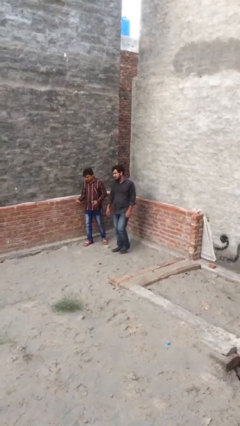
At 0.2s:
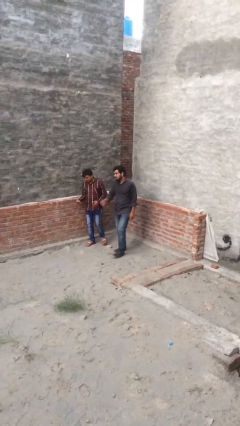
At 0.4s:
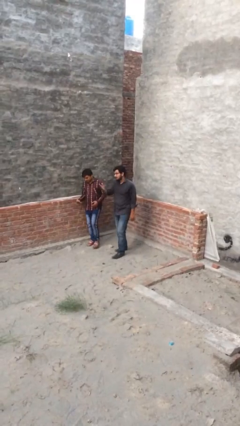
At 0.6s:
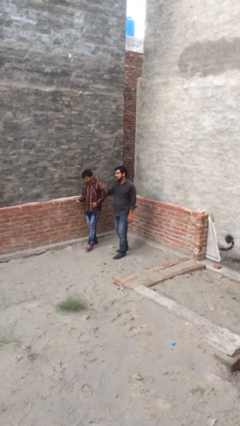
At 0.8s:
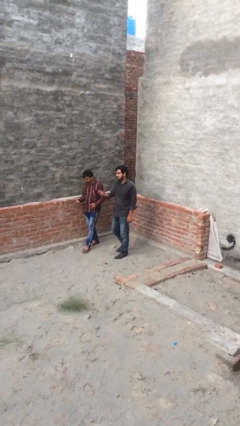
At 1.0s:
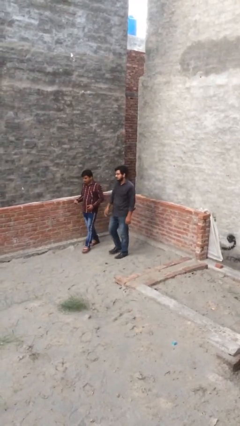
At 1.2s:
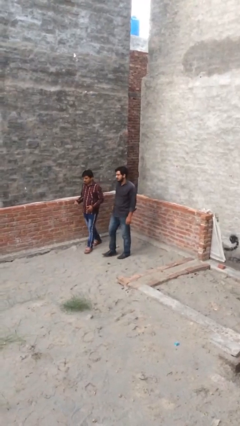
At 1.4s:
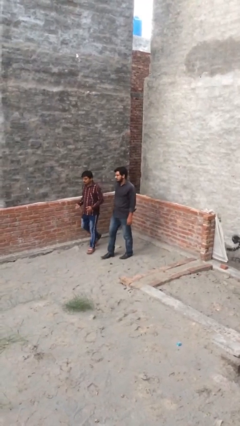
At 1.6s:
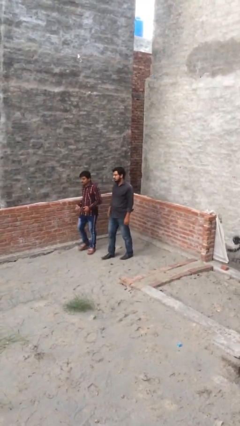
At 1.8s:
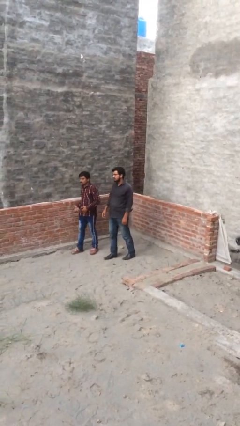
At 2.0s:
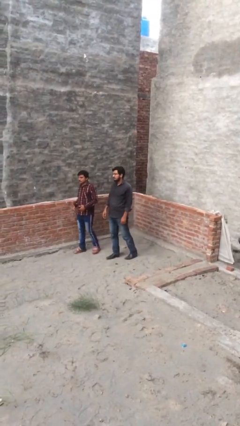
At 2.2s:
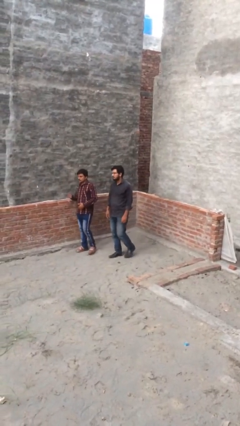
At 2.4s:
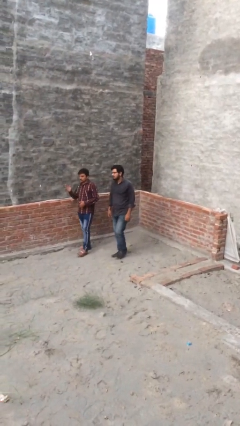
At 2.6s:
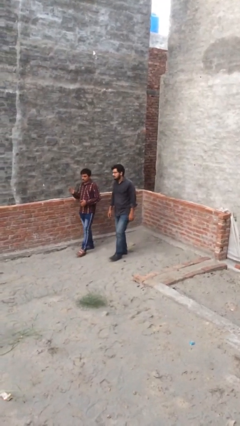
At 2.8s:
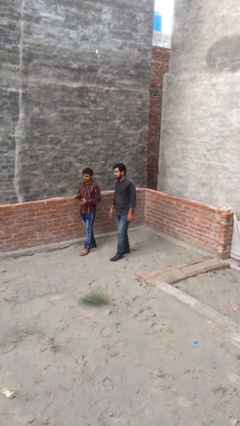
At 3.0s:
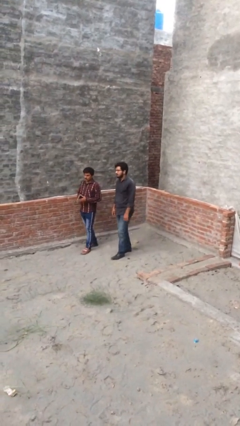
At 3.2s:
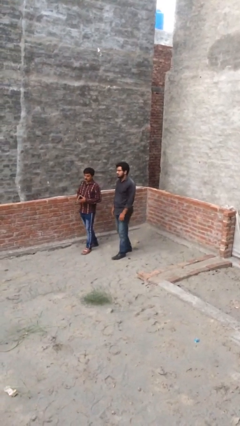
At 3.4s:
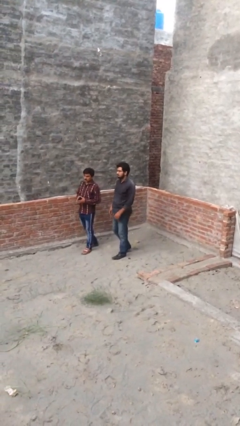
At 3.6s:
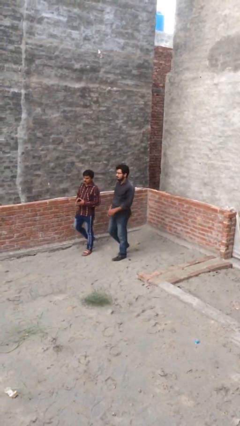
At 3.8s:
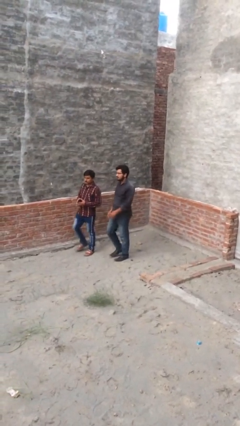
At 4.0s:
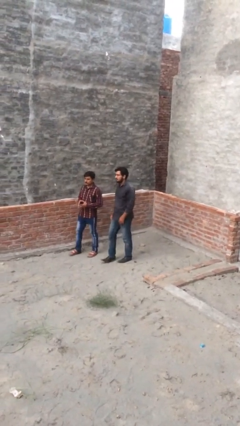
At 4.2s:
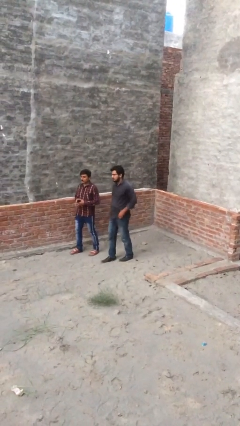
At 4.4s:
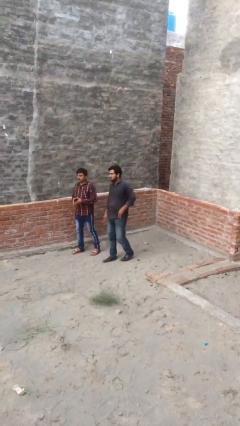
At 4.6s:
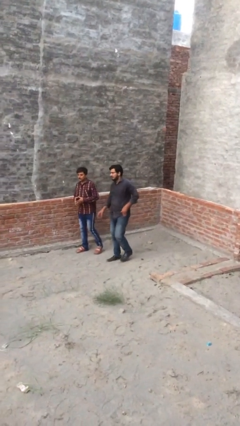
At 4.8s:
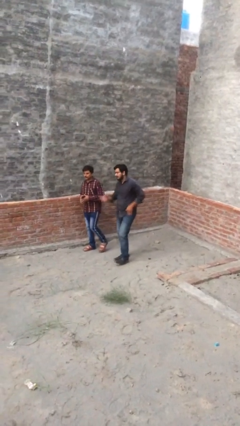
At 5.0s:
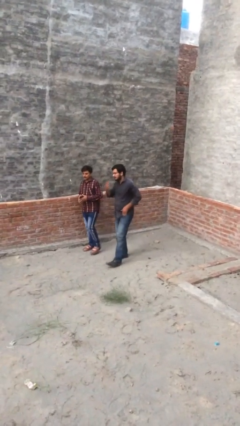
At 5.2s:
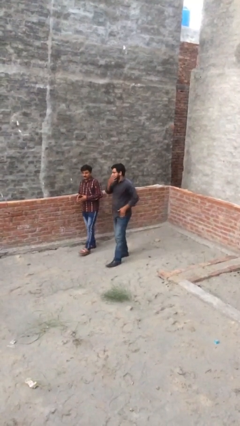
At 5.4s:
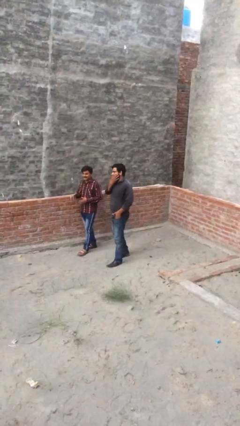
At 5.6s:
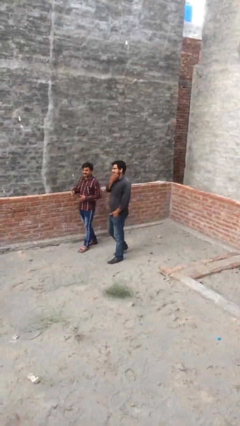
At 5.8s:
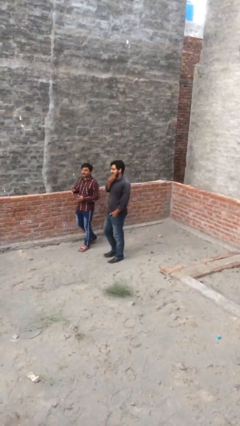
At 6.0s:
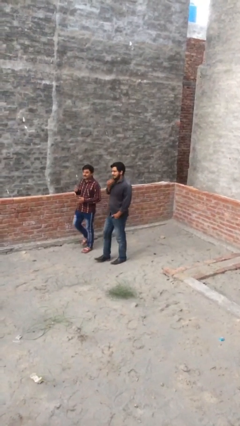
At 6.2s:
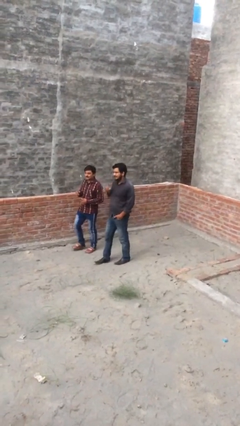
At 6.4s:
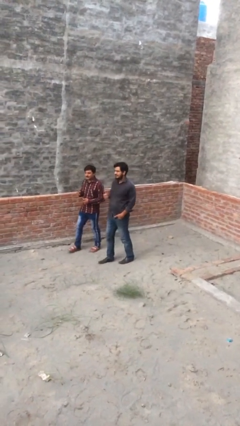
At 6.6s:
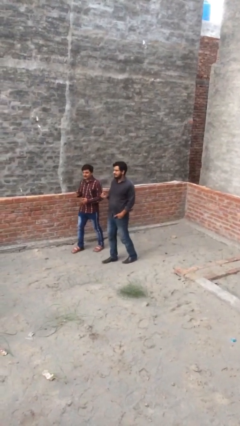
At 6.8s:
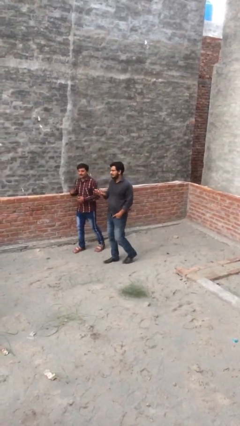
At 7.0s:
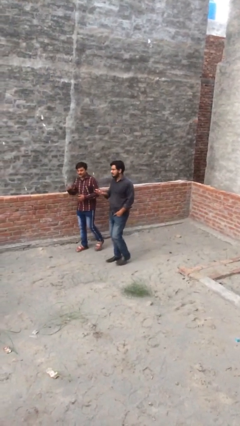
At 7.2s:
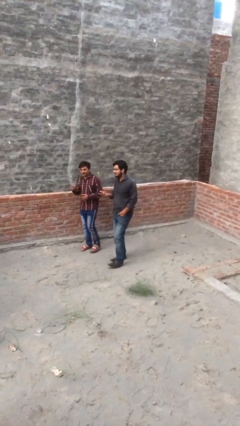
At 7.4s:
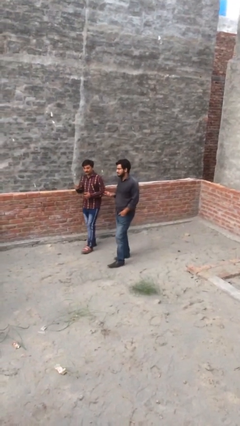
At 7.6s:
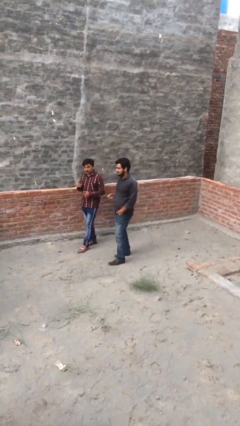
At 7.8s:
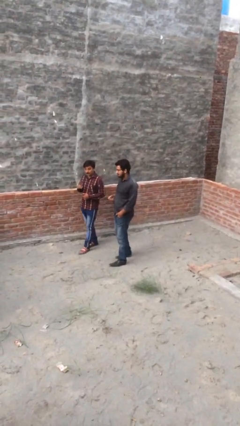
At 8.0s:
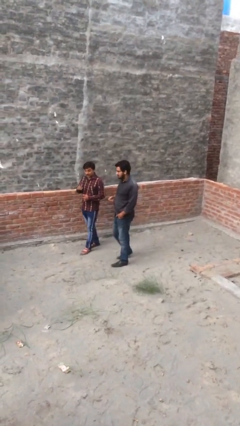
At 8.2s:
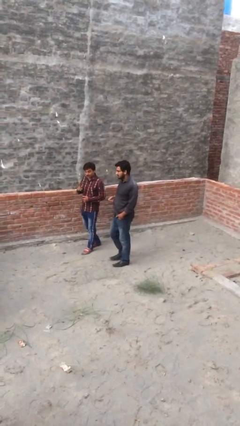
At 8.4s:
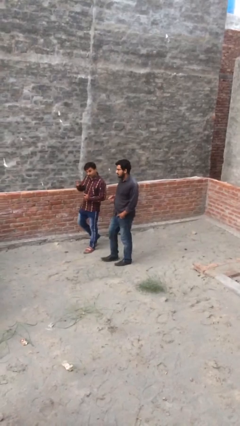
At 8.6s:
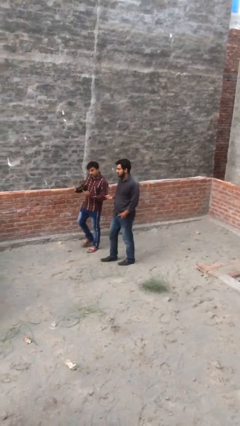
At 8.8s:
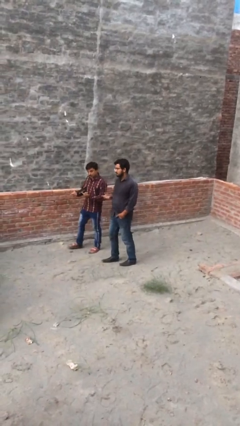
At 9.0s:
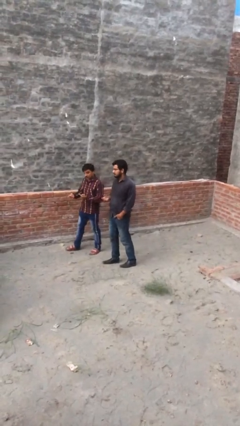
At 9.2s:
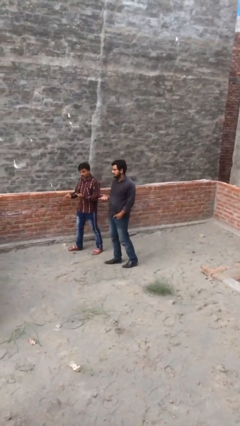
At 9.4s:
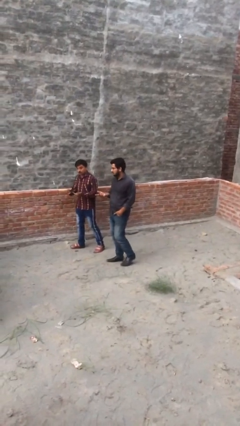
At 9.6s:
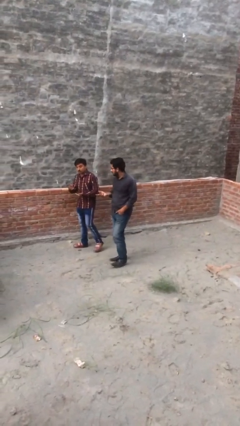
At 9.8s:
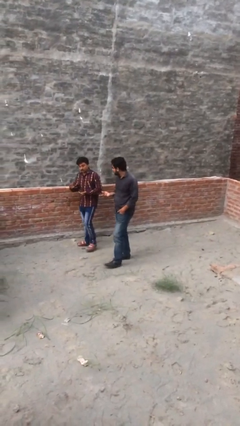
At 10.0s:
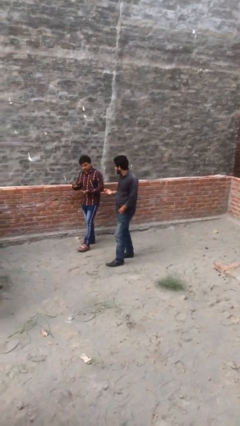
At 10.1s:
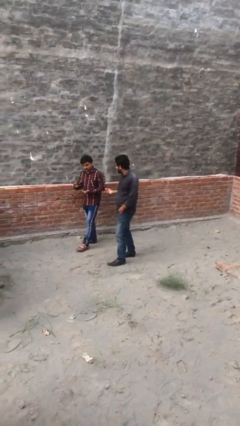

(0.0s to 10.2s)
person talks to person

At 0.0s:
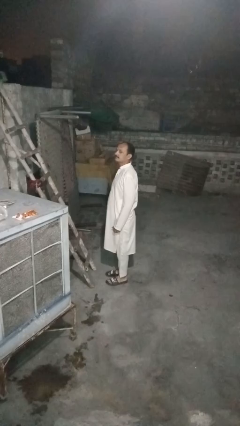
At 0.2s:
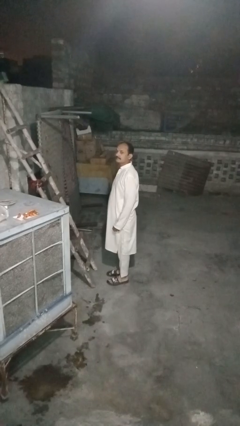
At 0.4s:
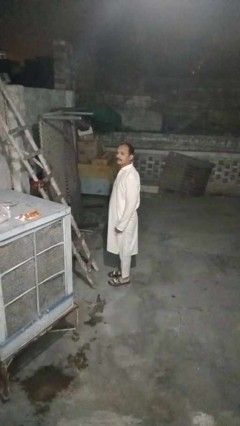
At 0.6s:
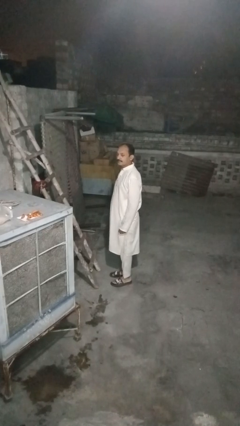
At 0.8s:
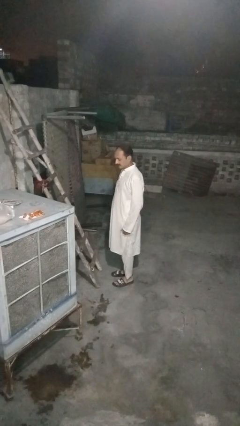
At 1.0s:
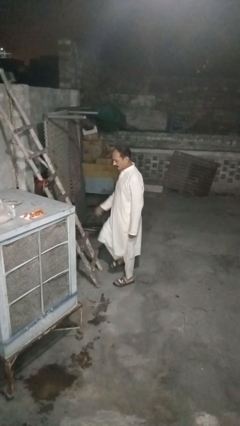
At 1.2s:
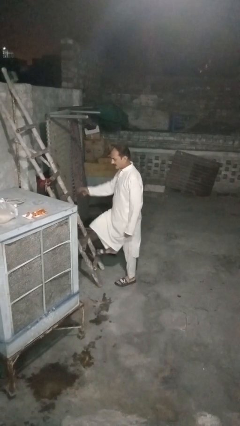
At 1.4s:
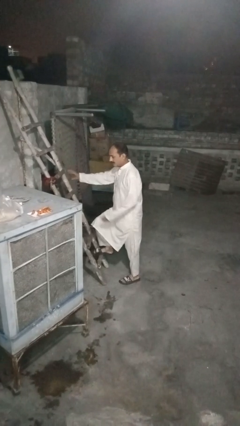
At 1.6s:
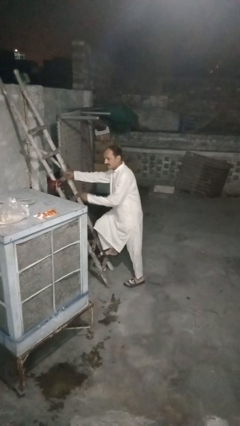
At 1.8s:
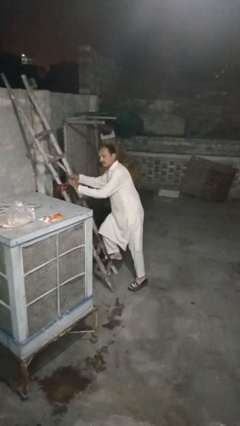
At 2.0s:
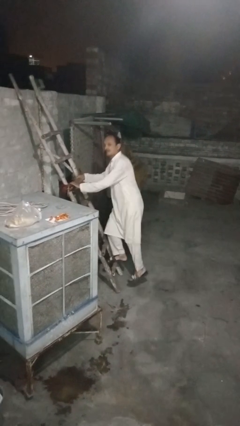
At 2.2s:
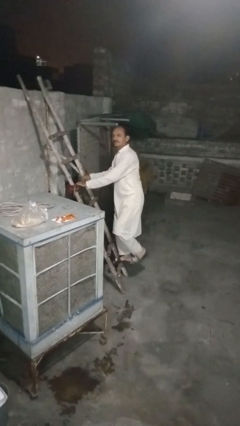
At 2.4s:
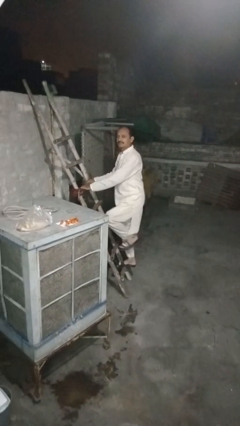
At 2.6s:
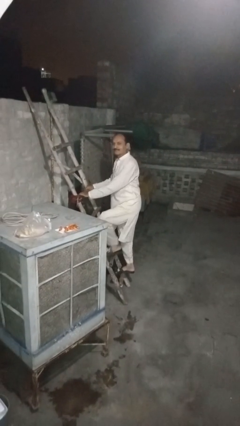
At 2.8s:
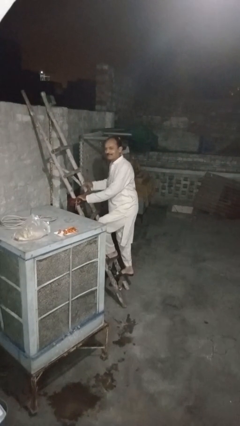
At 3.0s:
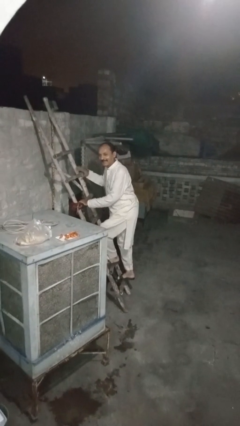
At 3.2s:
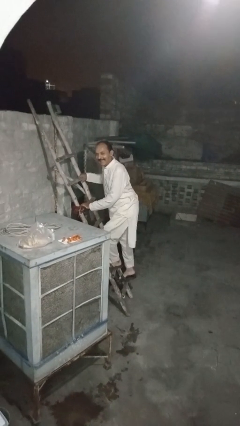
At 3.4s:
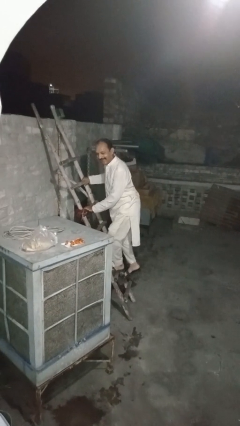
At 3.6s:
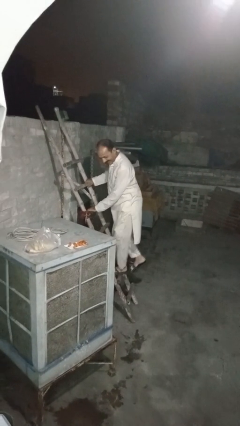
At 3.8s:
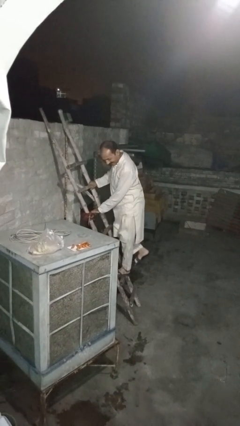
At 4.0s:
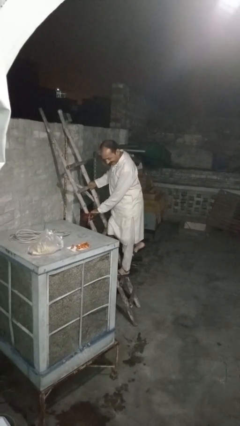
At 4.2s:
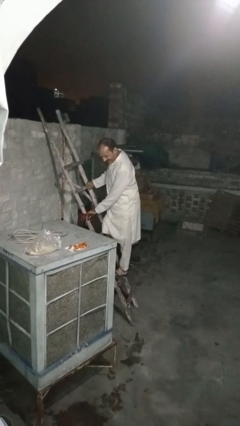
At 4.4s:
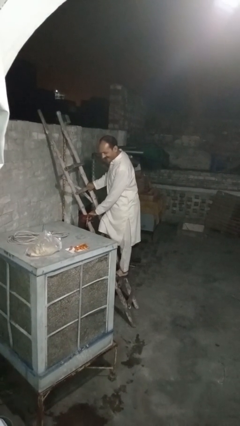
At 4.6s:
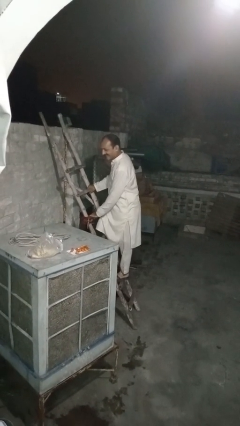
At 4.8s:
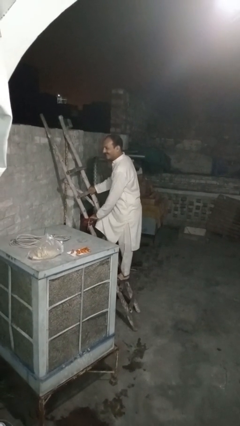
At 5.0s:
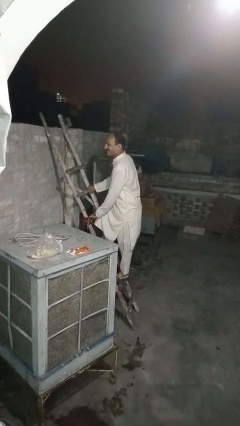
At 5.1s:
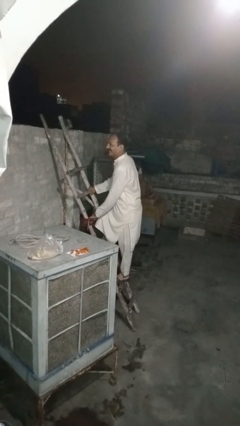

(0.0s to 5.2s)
person climbs up ladder

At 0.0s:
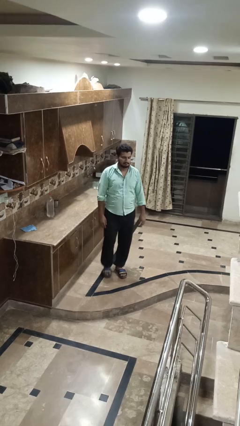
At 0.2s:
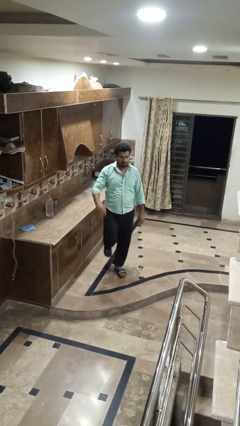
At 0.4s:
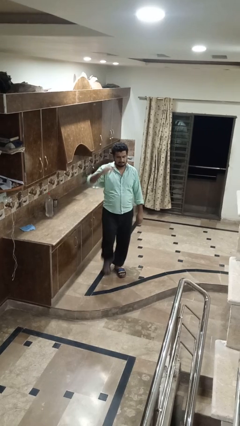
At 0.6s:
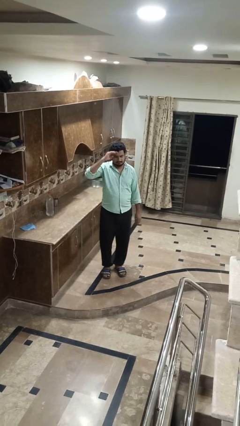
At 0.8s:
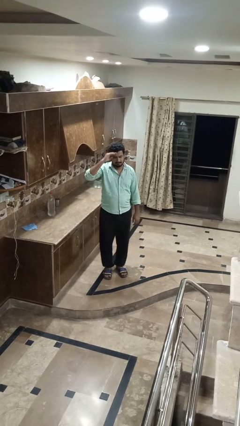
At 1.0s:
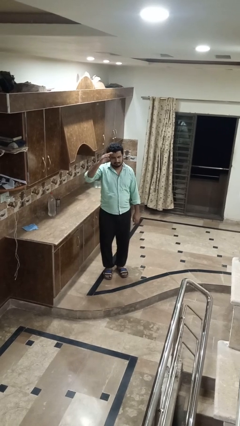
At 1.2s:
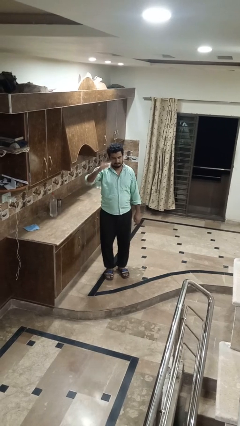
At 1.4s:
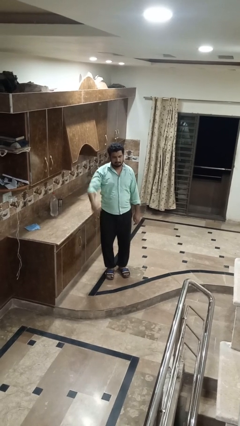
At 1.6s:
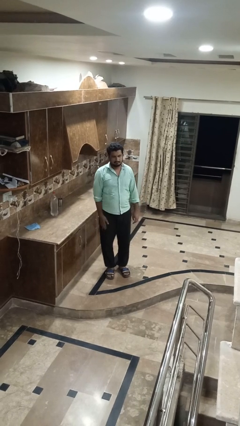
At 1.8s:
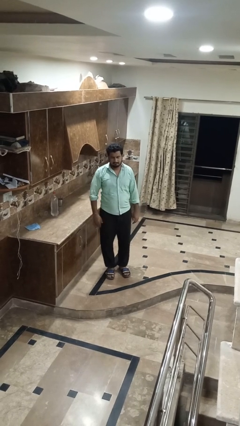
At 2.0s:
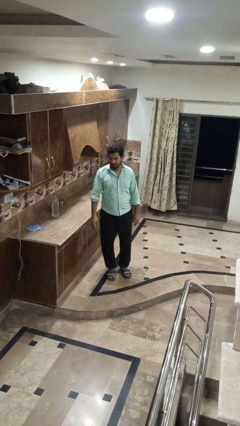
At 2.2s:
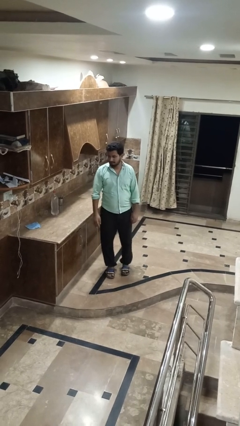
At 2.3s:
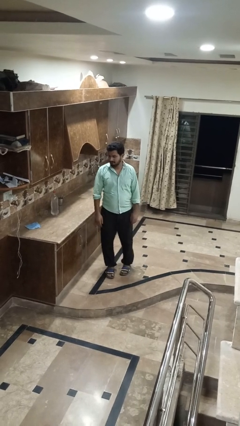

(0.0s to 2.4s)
person salutes

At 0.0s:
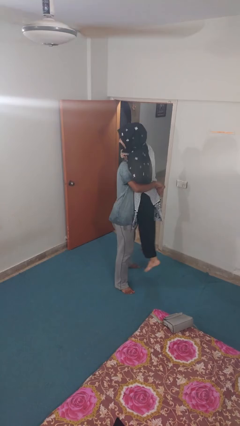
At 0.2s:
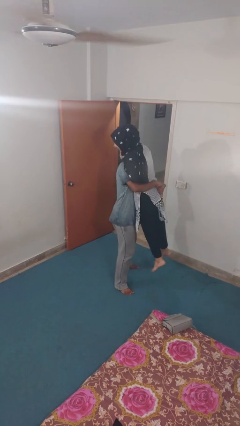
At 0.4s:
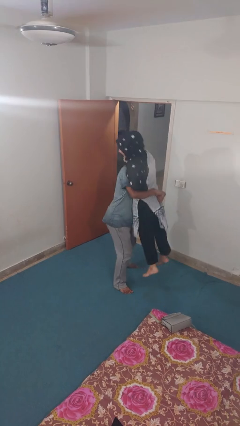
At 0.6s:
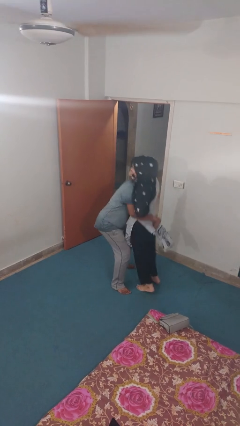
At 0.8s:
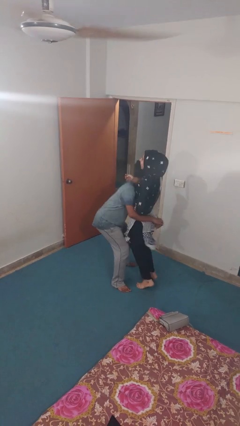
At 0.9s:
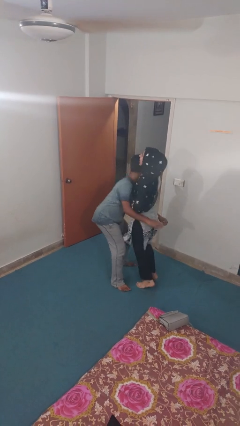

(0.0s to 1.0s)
person puts down person
